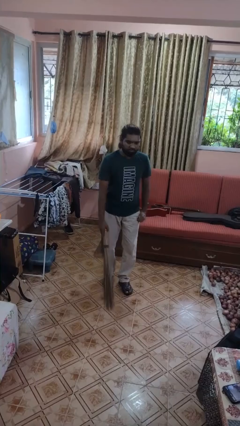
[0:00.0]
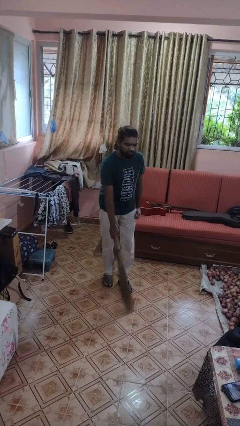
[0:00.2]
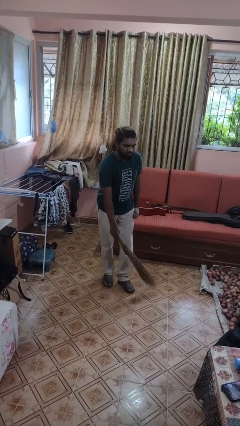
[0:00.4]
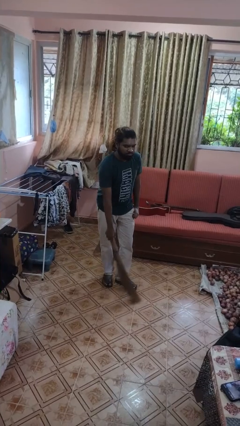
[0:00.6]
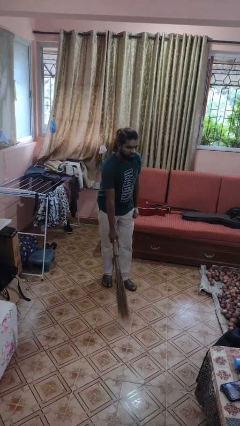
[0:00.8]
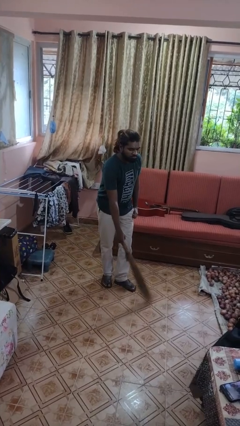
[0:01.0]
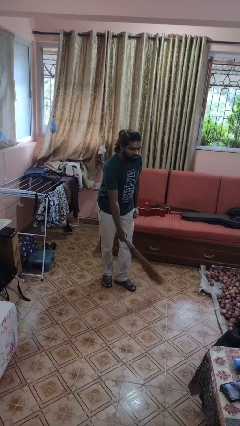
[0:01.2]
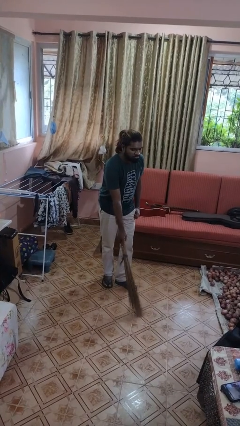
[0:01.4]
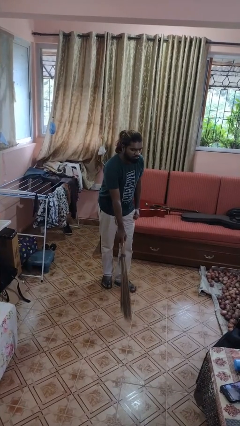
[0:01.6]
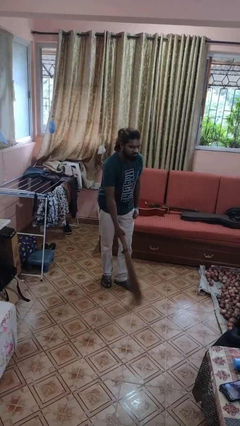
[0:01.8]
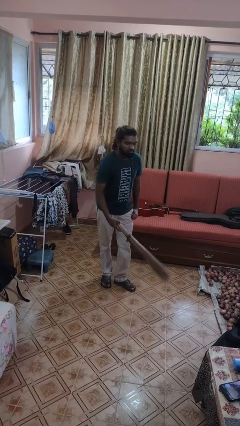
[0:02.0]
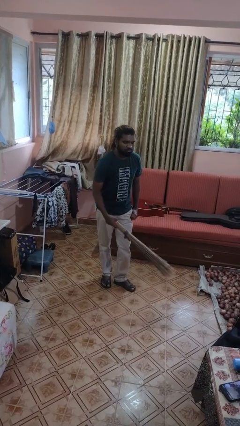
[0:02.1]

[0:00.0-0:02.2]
person sweeps floor

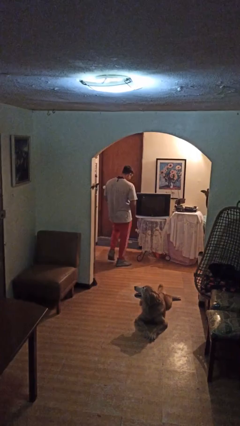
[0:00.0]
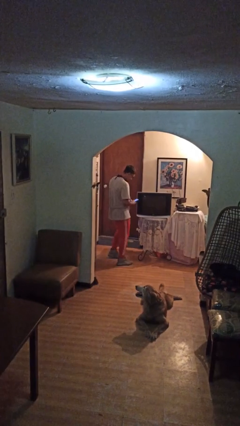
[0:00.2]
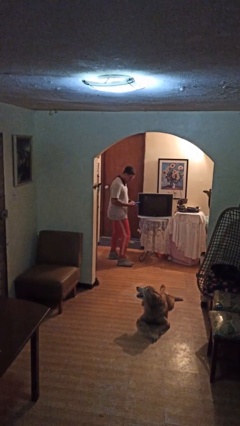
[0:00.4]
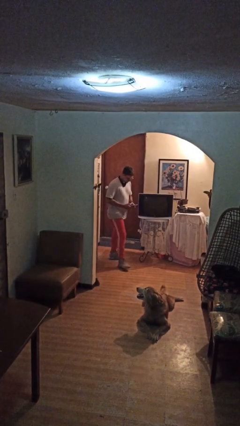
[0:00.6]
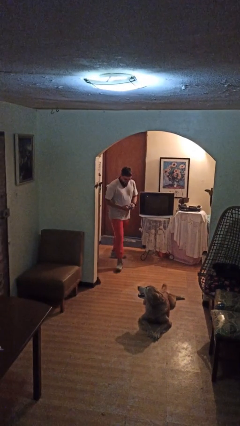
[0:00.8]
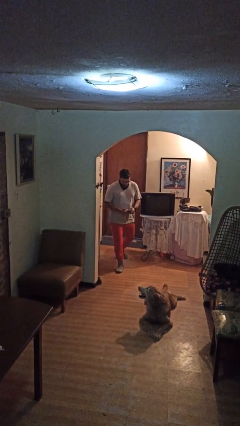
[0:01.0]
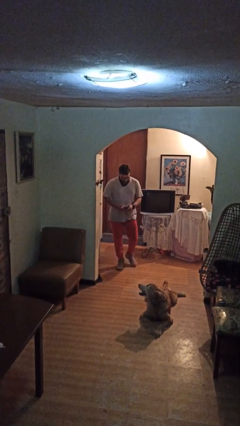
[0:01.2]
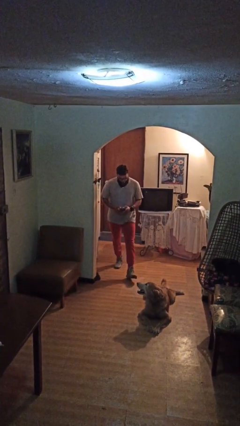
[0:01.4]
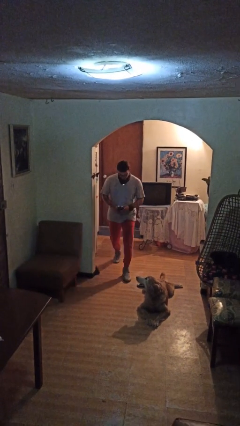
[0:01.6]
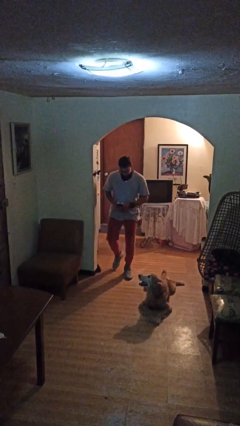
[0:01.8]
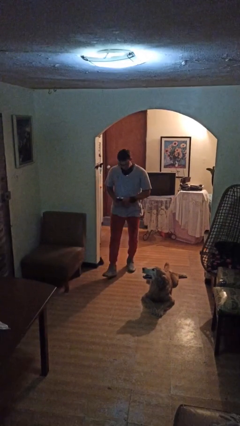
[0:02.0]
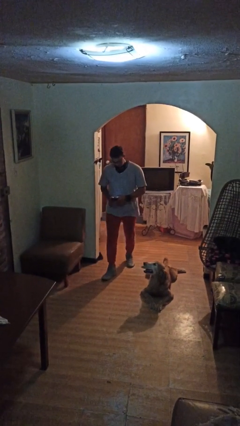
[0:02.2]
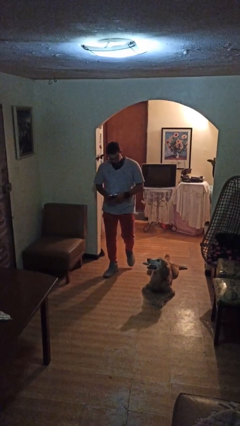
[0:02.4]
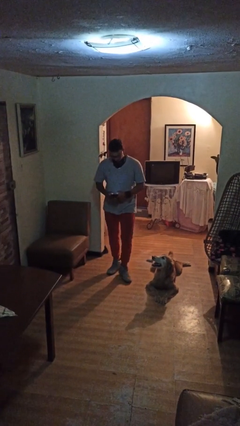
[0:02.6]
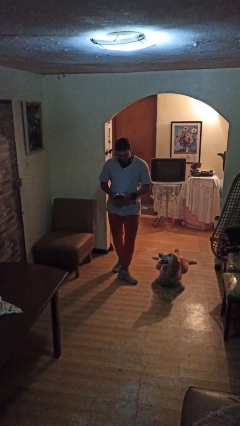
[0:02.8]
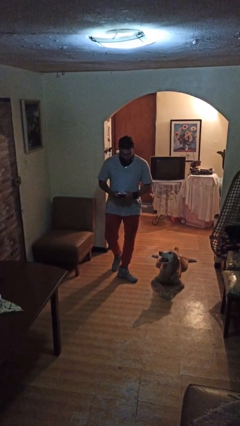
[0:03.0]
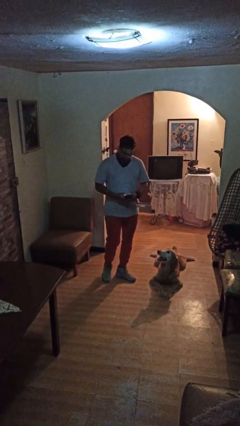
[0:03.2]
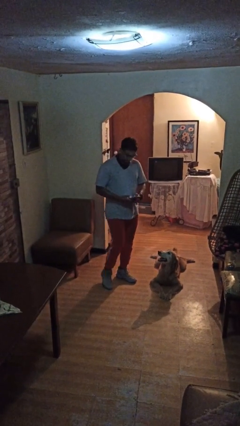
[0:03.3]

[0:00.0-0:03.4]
person enters scene through structure

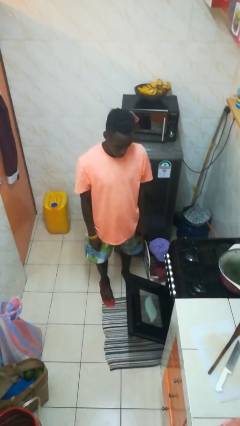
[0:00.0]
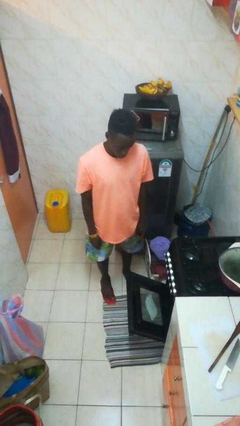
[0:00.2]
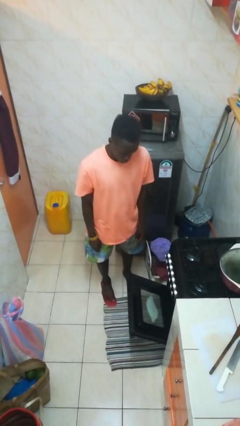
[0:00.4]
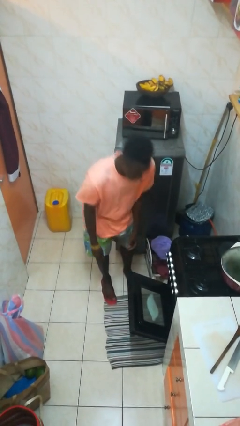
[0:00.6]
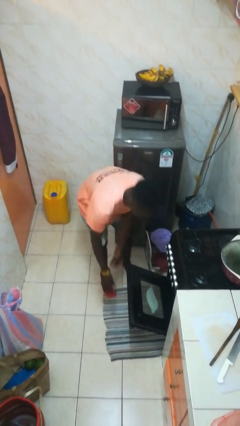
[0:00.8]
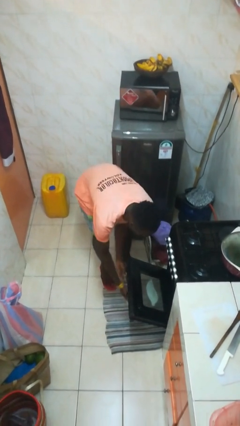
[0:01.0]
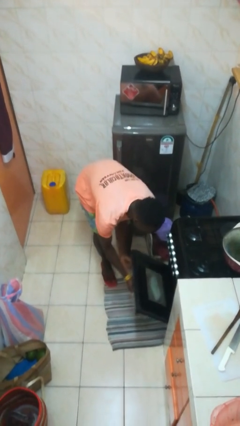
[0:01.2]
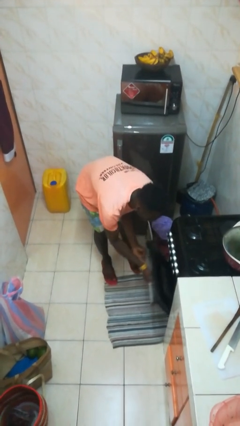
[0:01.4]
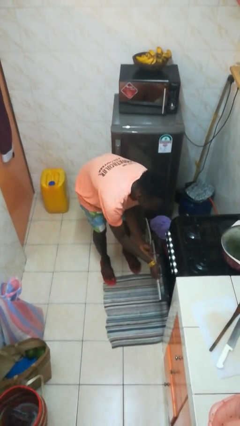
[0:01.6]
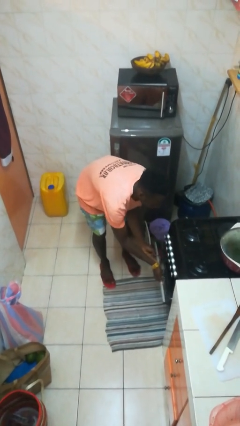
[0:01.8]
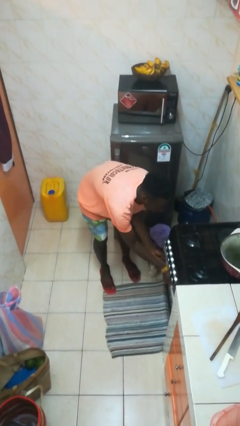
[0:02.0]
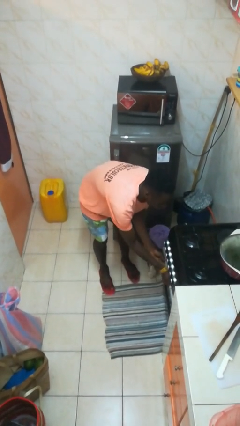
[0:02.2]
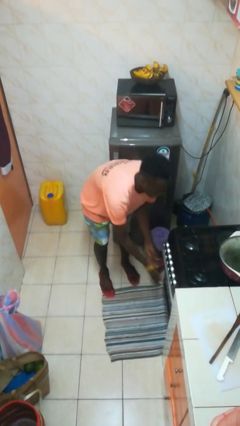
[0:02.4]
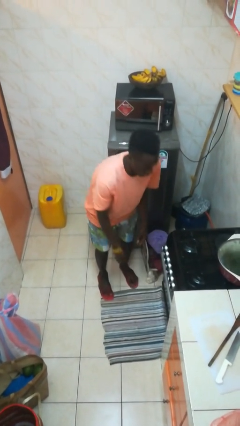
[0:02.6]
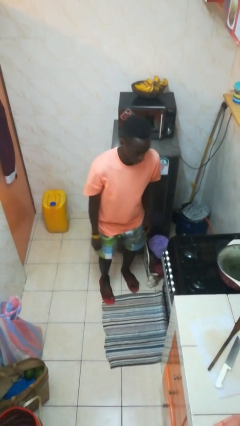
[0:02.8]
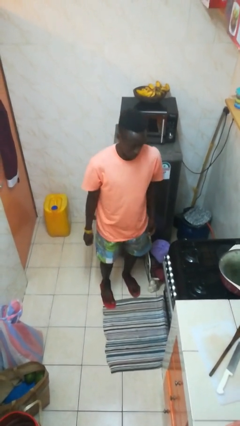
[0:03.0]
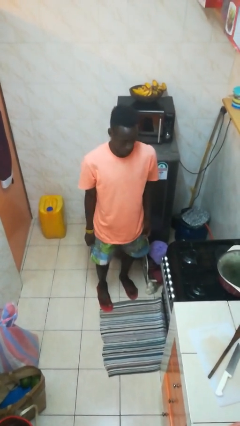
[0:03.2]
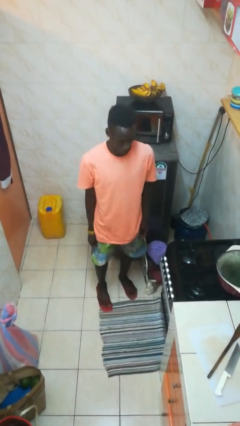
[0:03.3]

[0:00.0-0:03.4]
person closes oven door

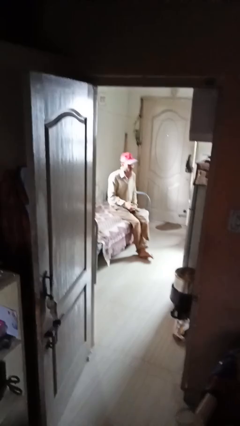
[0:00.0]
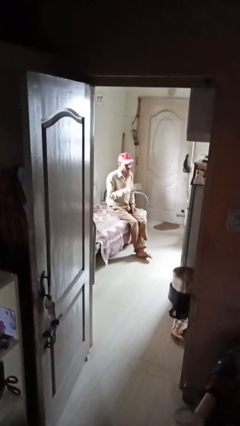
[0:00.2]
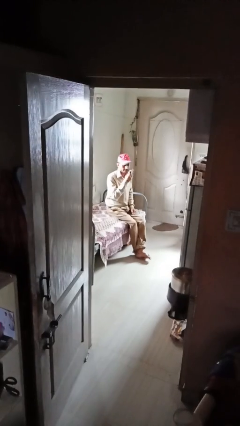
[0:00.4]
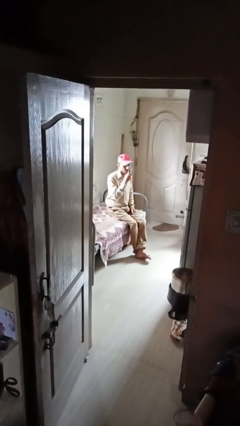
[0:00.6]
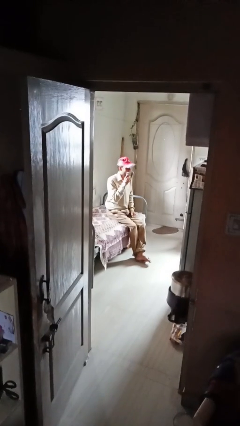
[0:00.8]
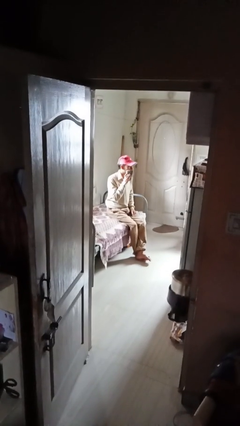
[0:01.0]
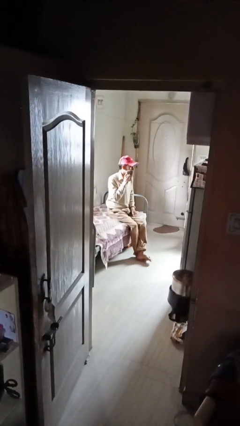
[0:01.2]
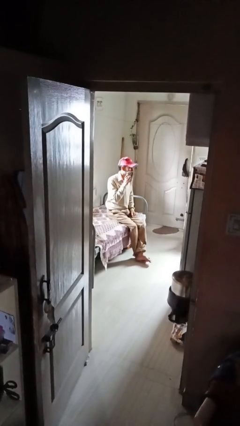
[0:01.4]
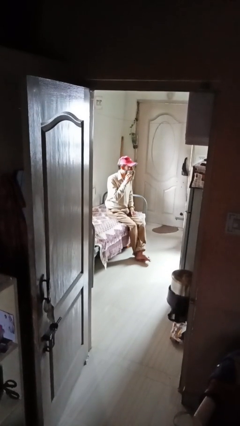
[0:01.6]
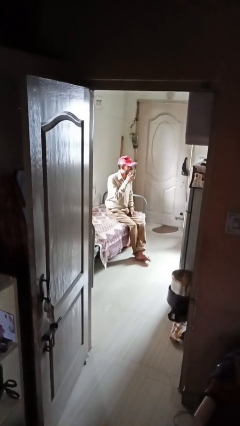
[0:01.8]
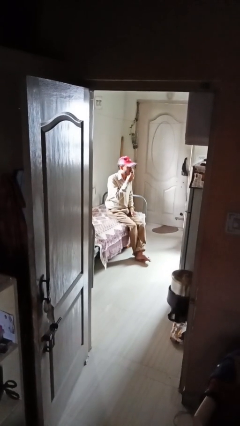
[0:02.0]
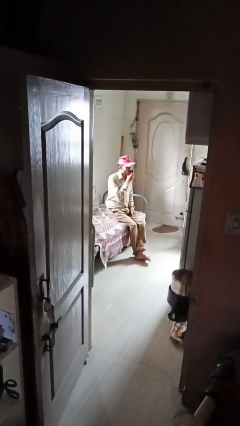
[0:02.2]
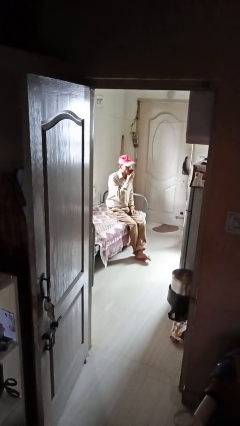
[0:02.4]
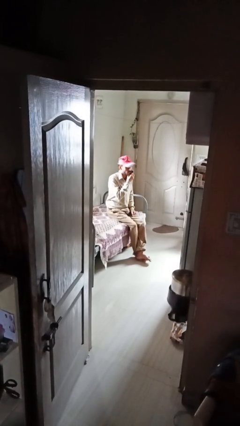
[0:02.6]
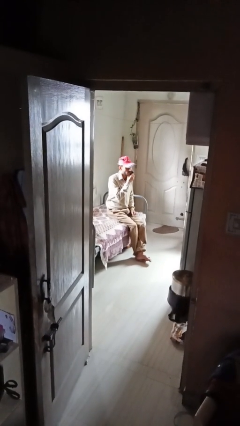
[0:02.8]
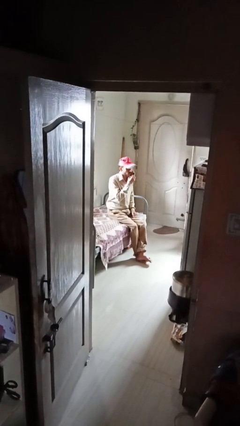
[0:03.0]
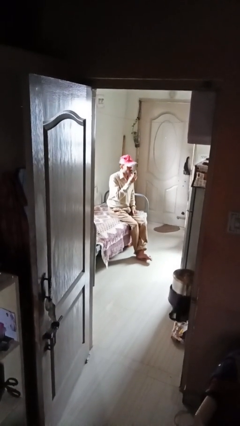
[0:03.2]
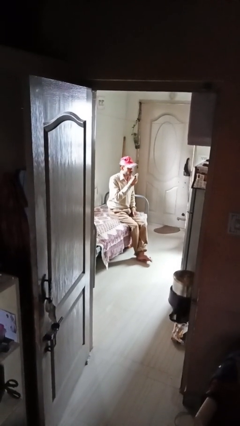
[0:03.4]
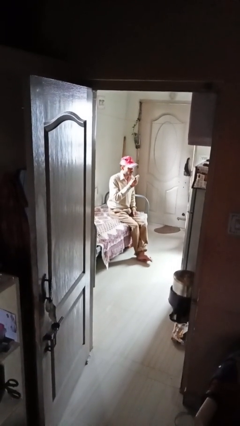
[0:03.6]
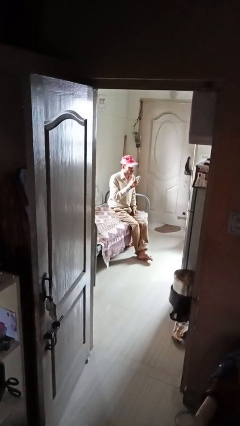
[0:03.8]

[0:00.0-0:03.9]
person wipes mouth with napkin

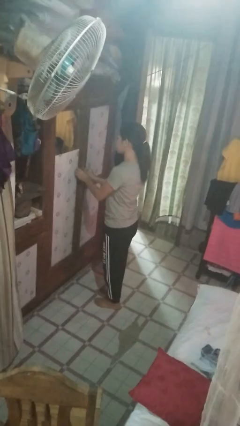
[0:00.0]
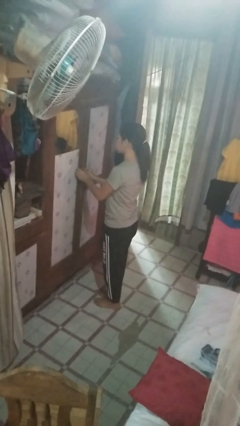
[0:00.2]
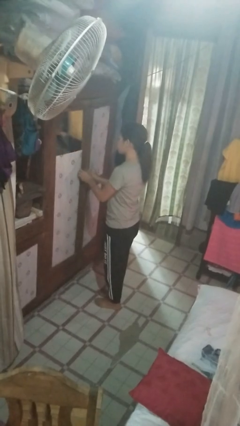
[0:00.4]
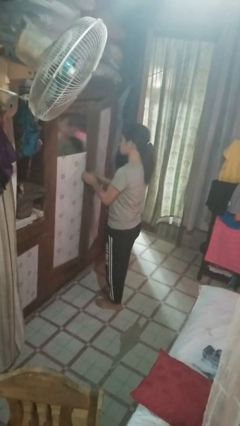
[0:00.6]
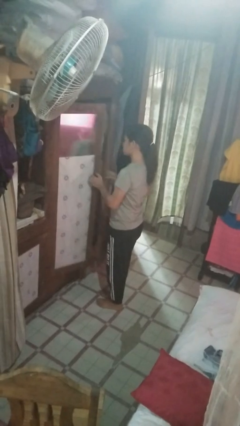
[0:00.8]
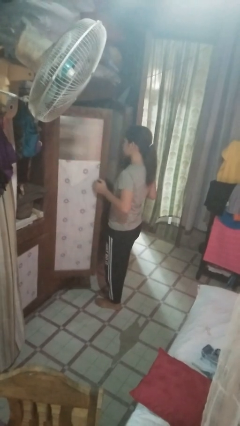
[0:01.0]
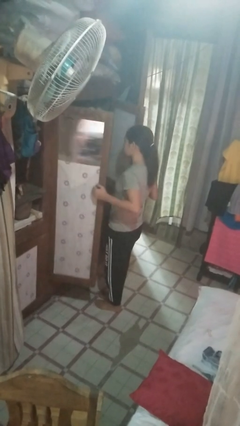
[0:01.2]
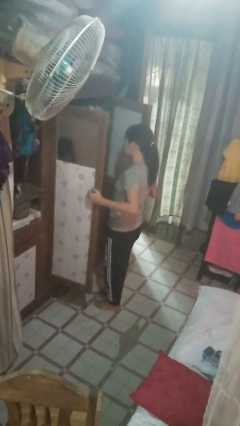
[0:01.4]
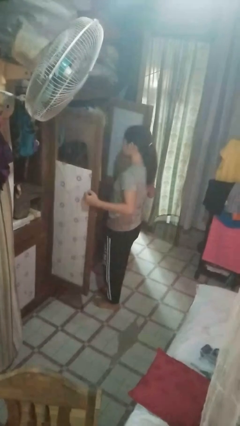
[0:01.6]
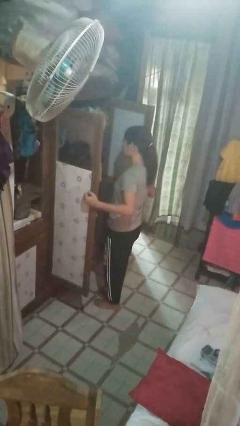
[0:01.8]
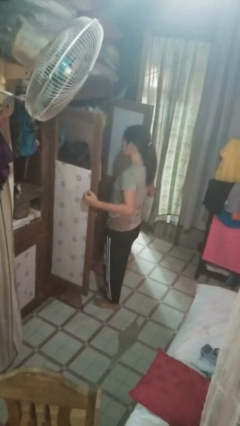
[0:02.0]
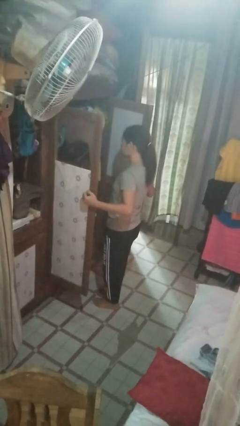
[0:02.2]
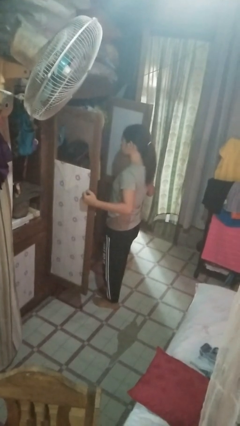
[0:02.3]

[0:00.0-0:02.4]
person opens closet door

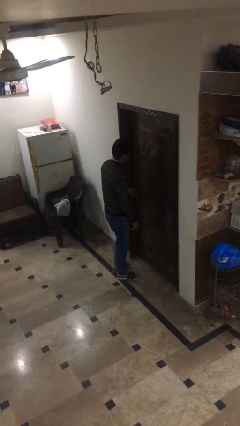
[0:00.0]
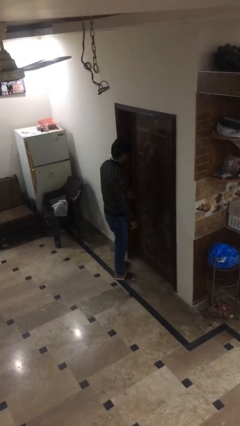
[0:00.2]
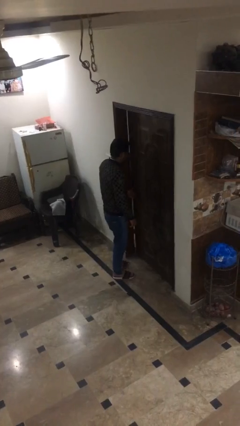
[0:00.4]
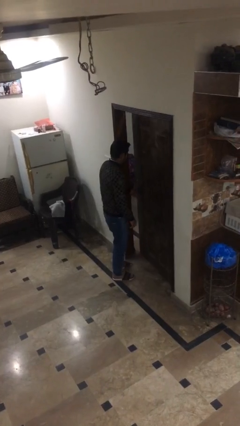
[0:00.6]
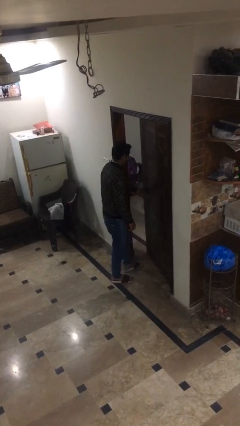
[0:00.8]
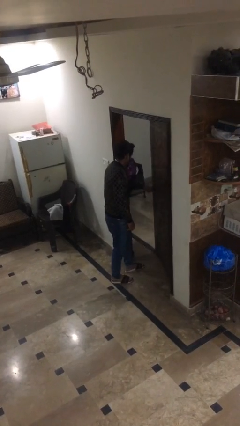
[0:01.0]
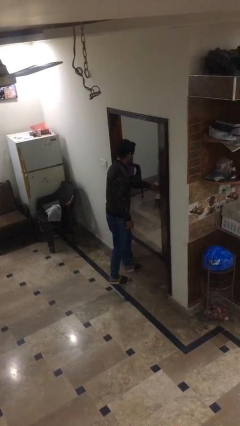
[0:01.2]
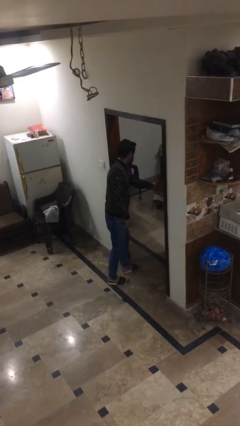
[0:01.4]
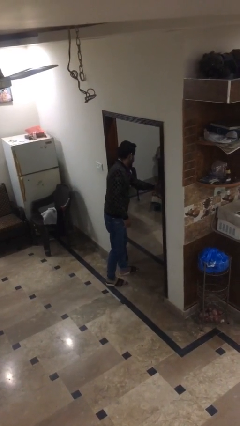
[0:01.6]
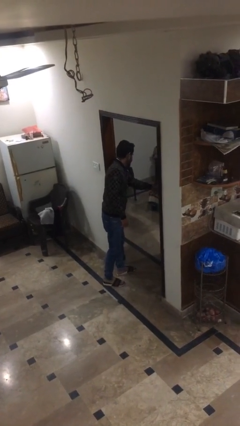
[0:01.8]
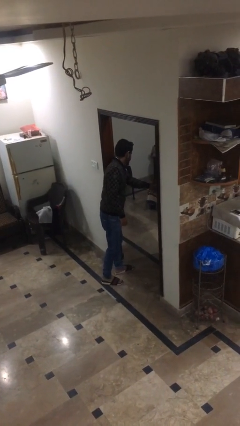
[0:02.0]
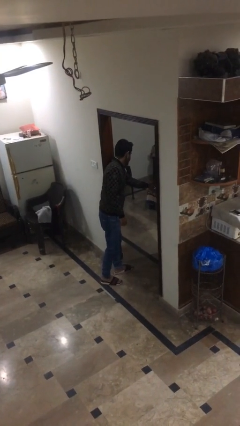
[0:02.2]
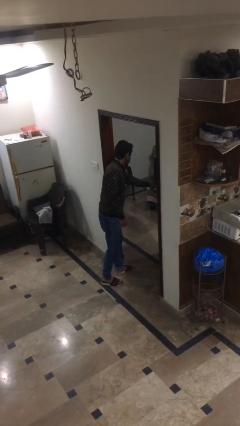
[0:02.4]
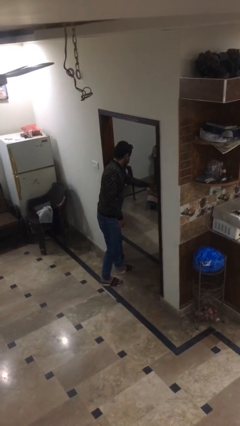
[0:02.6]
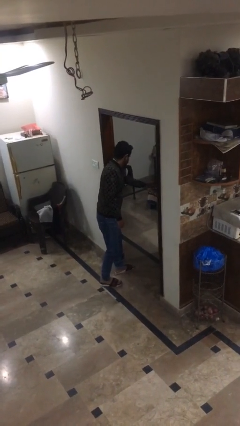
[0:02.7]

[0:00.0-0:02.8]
person opens facility door
